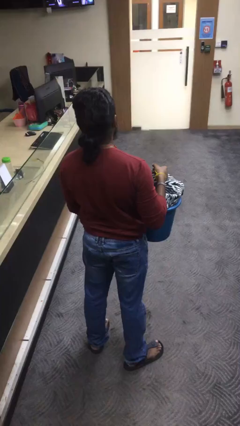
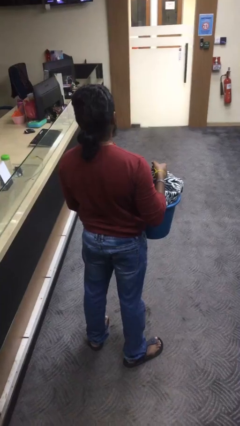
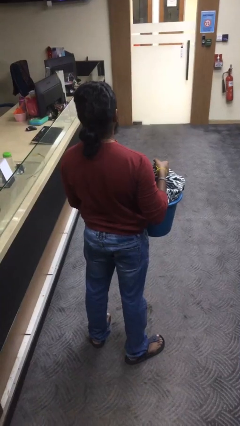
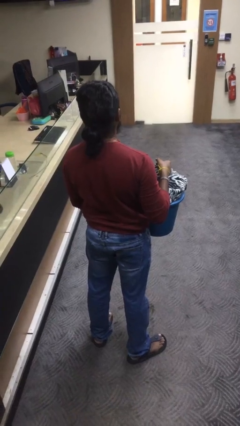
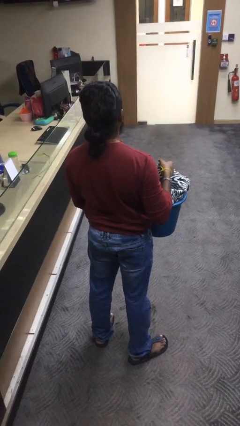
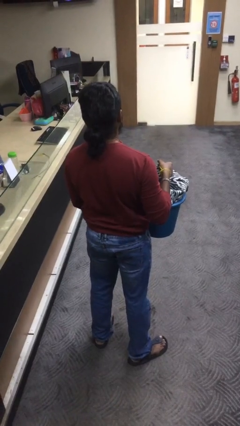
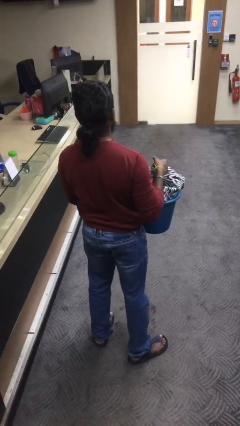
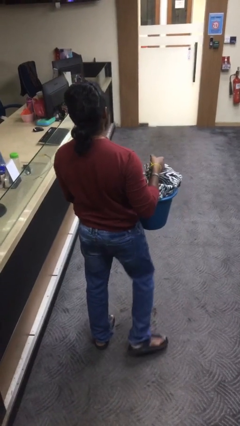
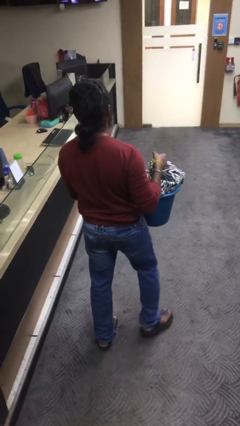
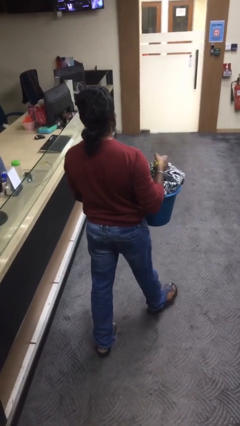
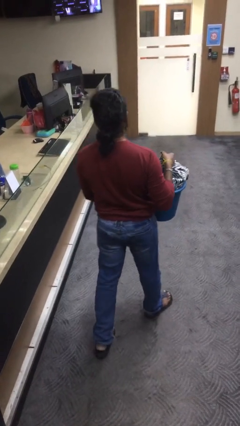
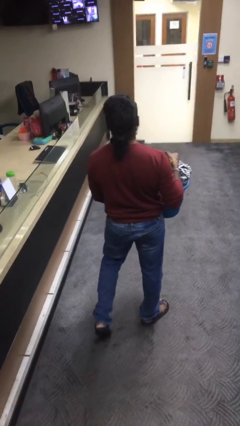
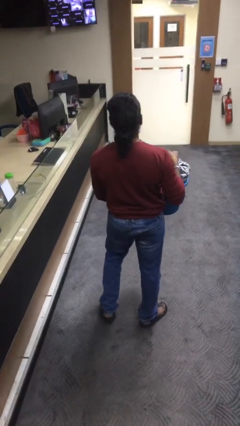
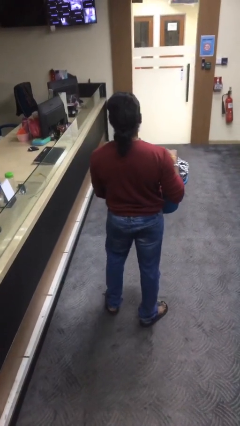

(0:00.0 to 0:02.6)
person carries laundry basket

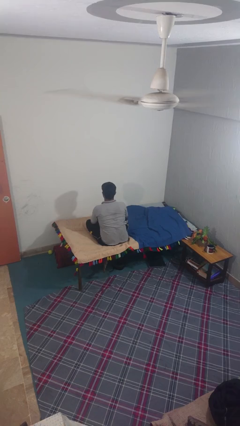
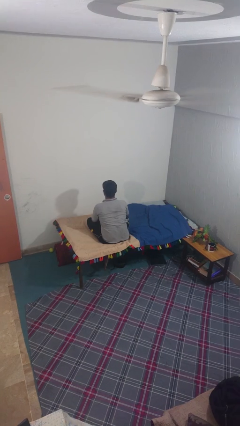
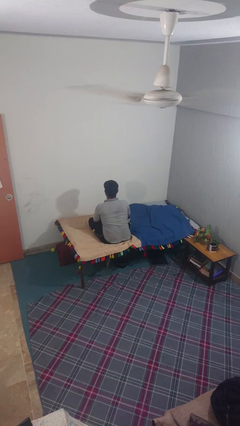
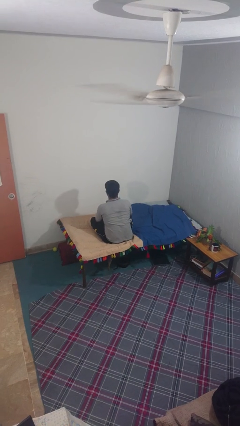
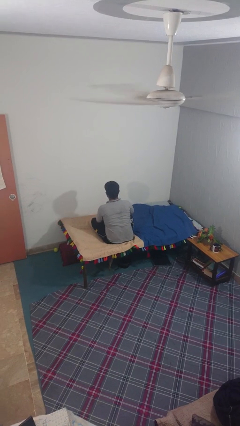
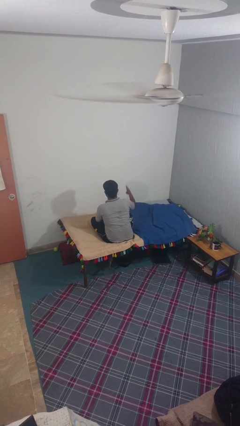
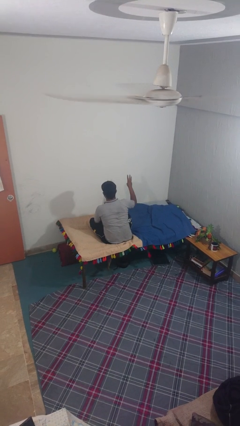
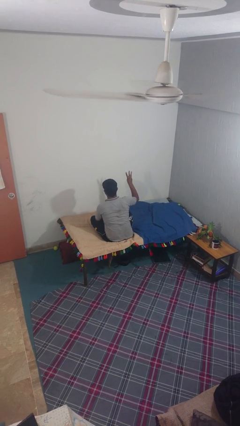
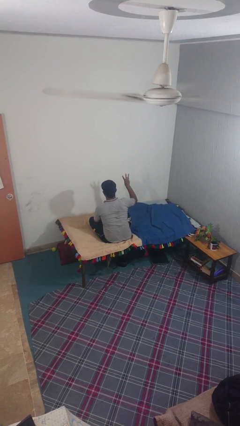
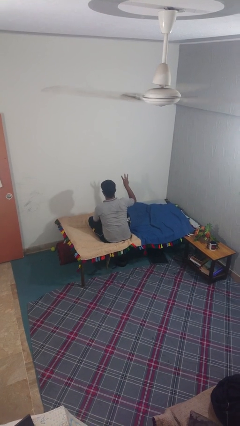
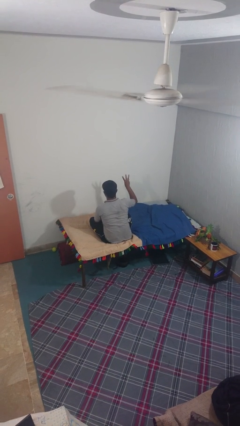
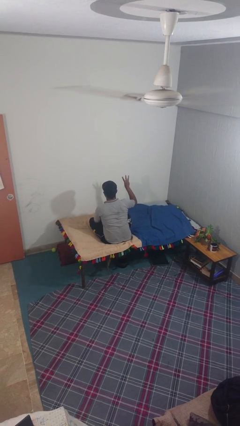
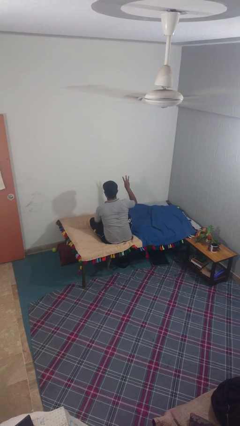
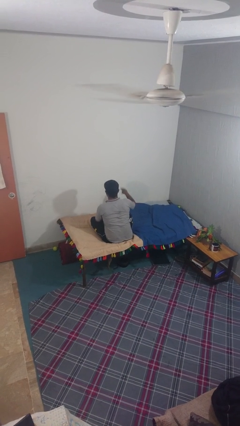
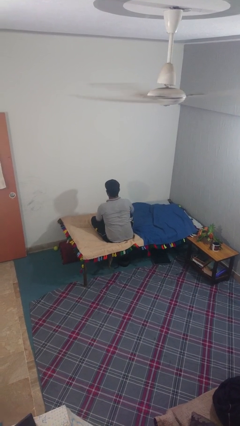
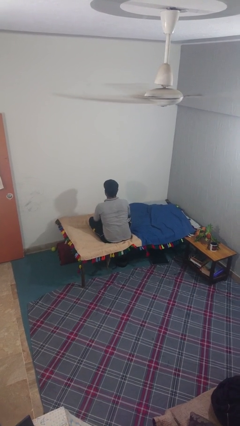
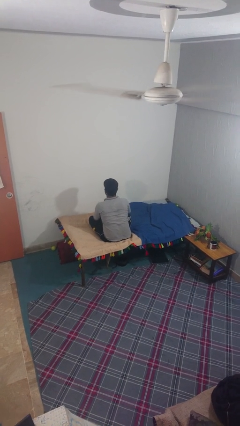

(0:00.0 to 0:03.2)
person gestures number three

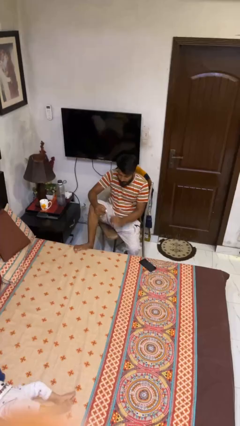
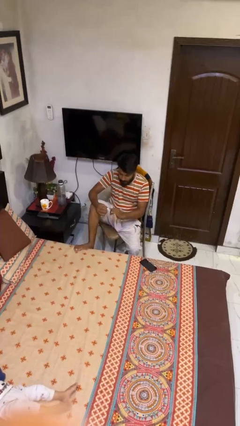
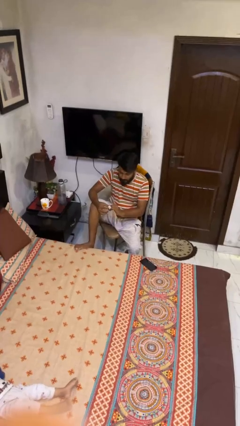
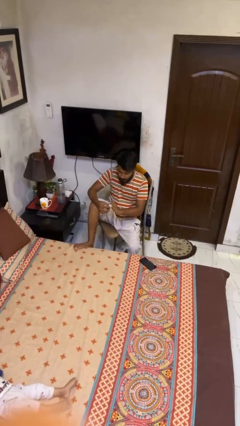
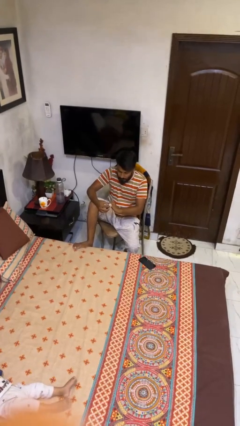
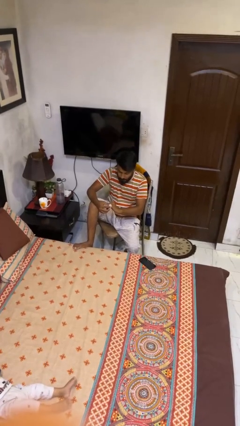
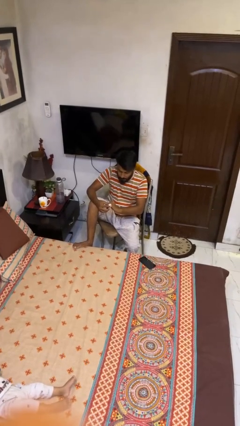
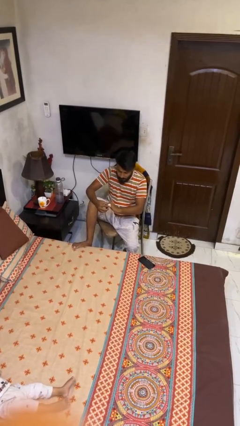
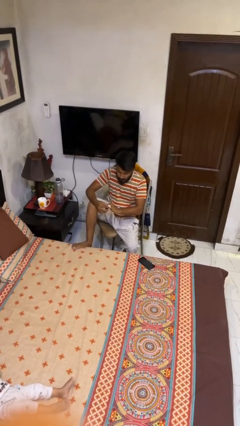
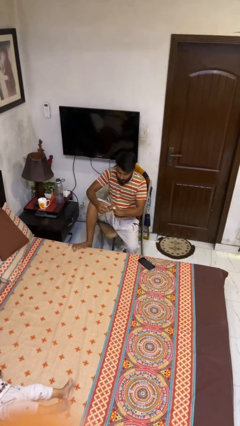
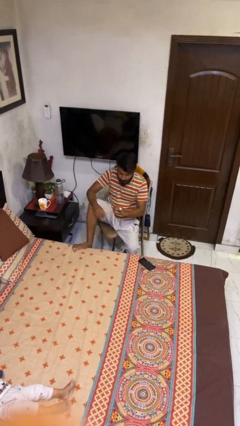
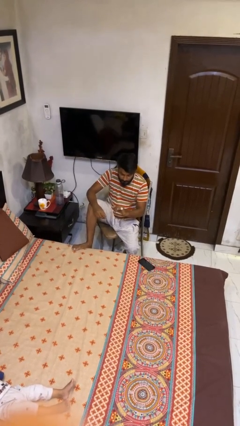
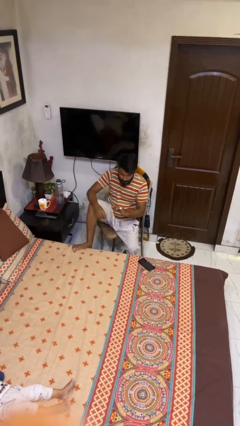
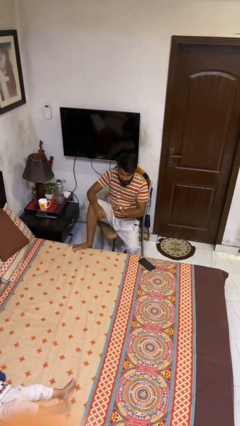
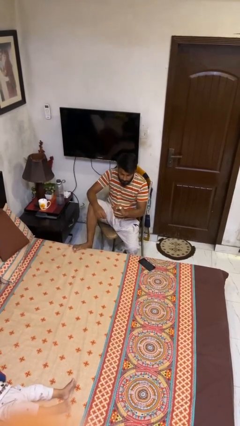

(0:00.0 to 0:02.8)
person puts on ring

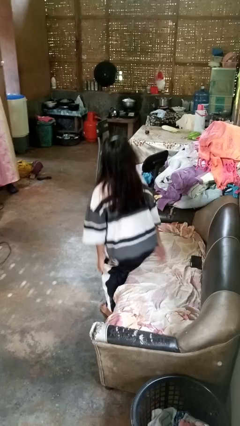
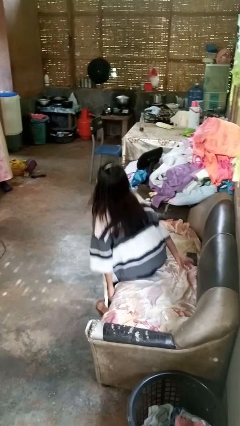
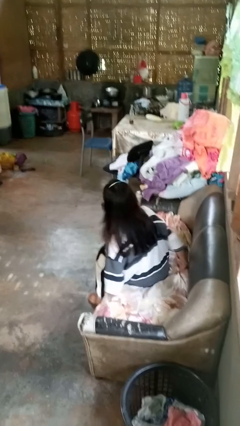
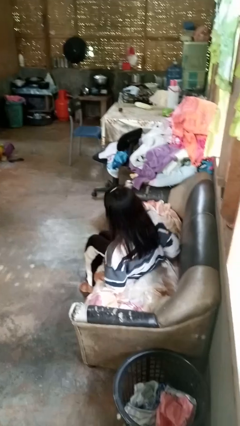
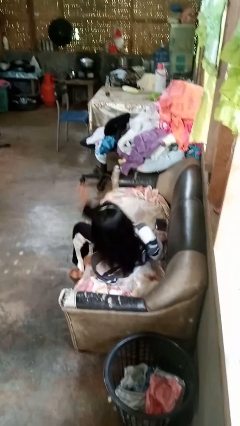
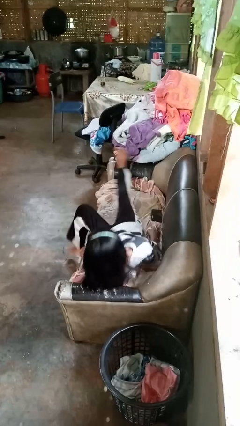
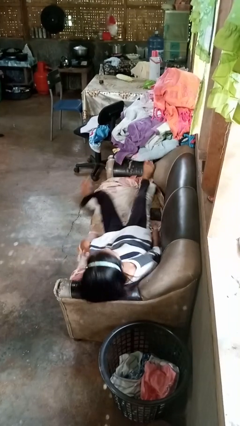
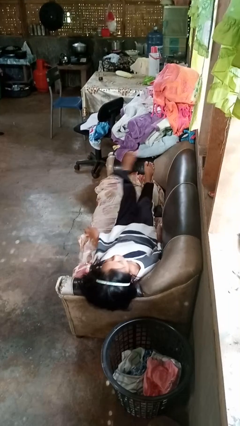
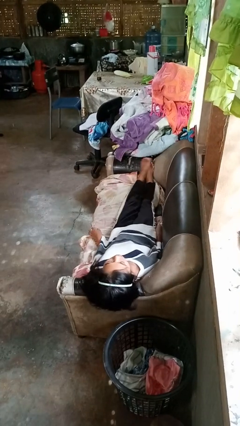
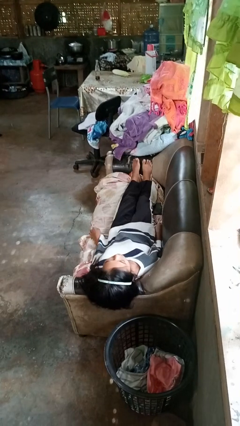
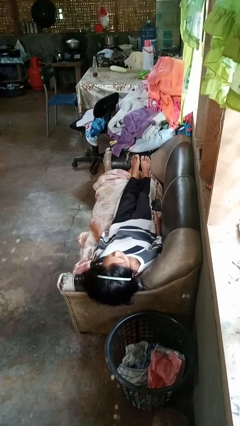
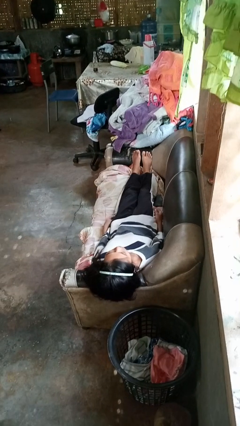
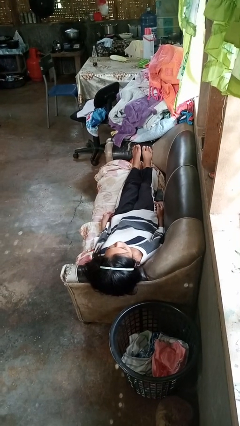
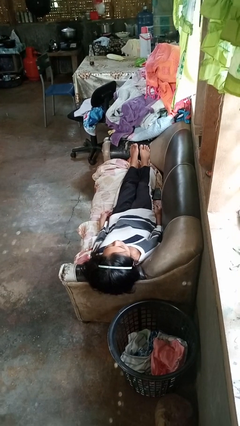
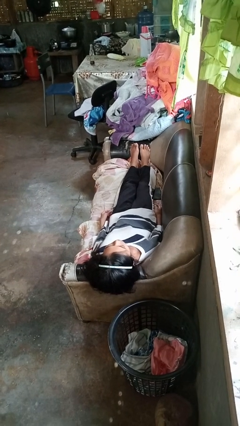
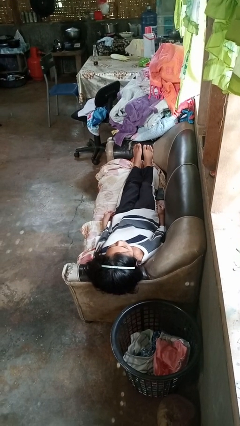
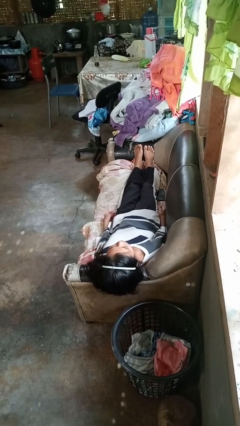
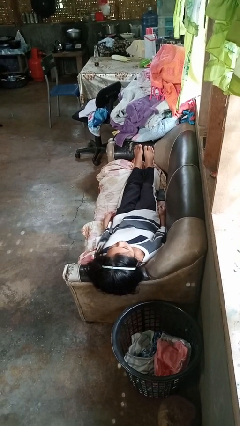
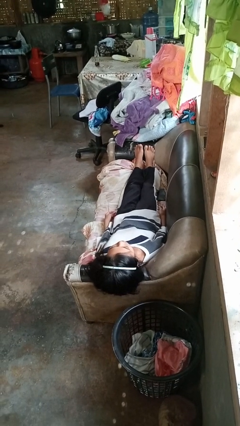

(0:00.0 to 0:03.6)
person lies down on couch

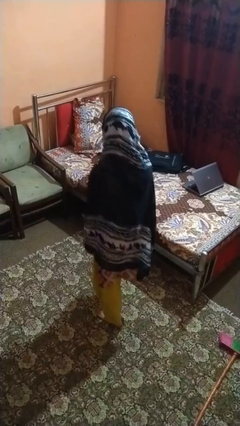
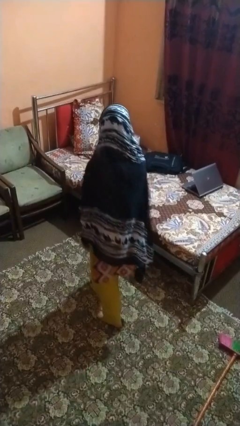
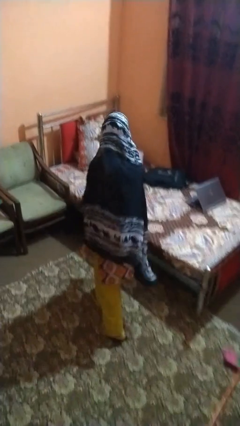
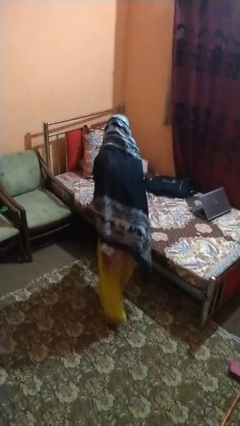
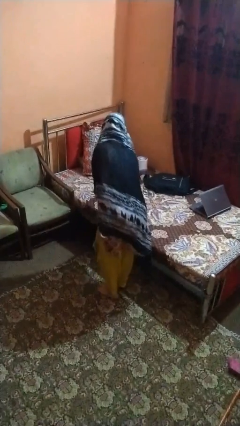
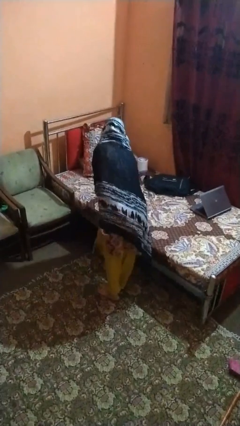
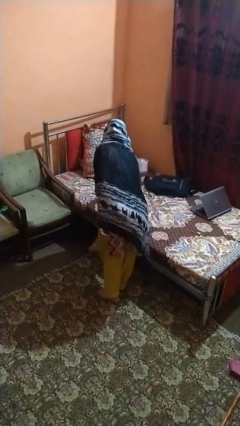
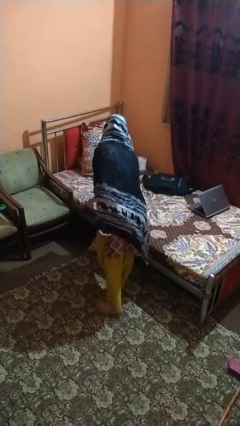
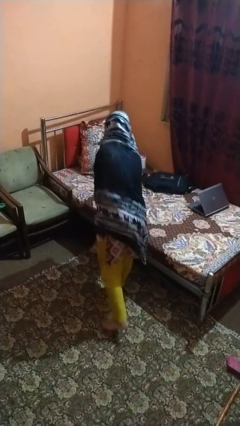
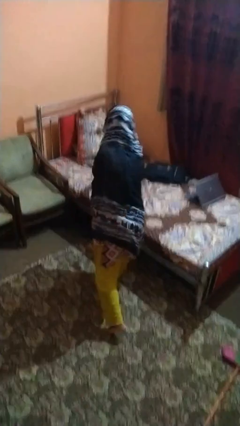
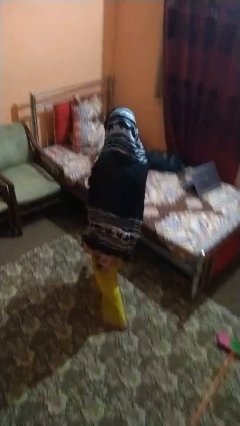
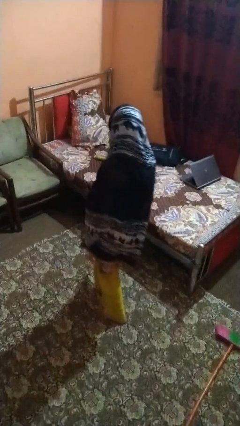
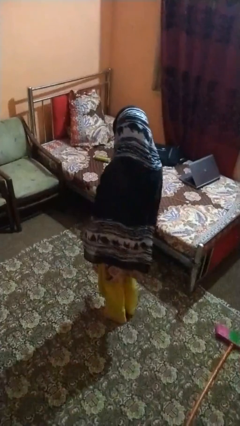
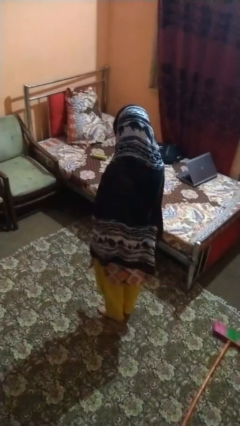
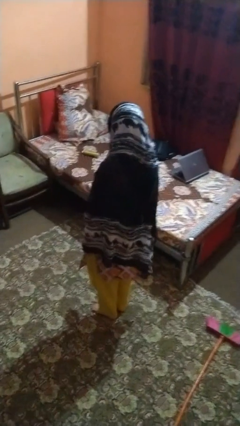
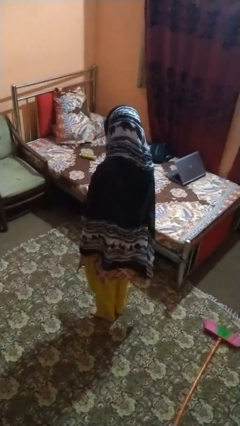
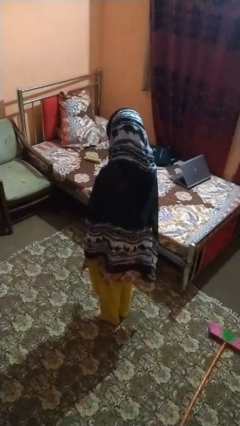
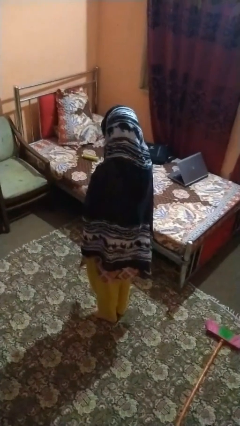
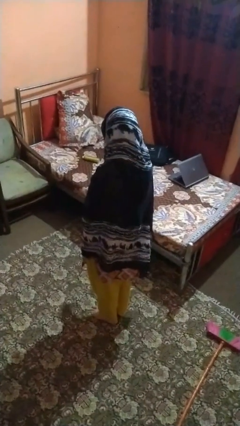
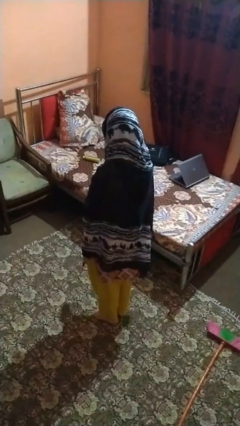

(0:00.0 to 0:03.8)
person picks up object from bed

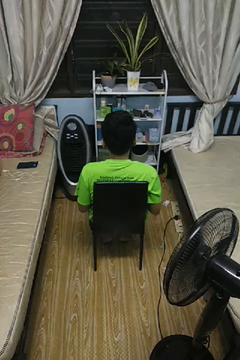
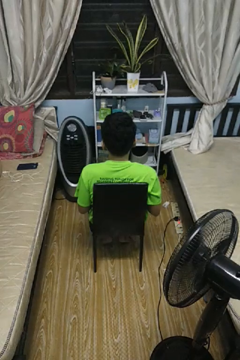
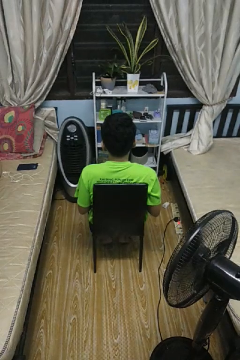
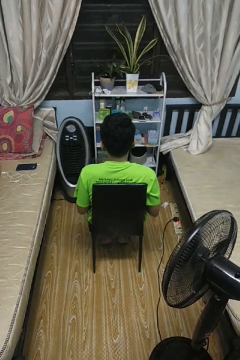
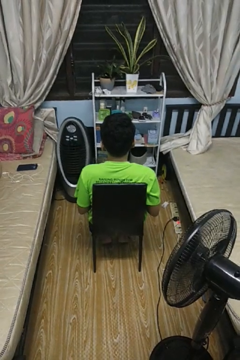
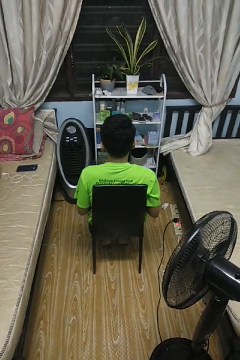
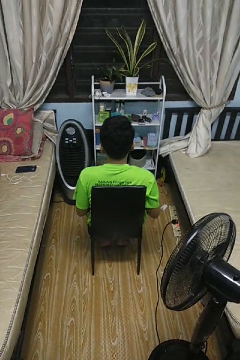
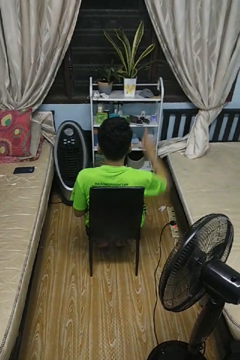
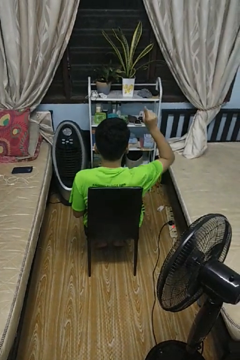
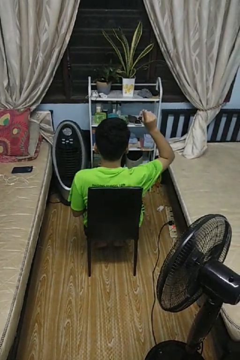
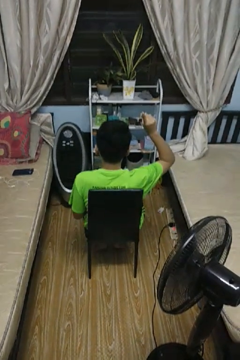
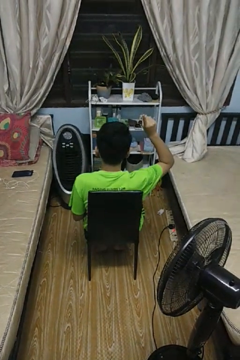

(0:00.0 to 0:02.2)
person gestures number one
